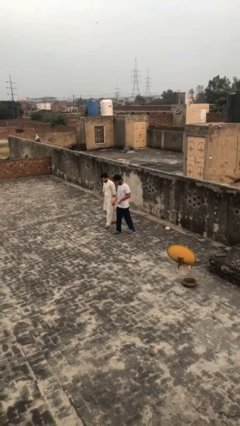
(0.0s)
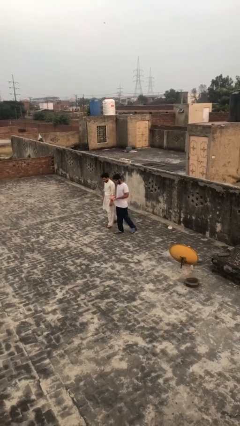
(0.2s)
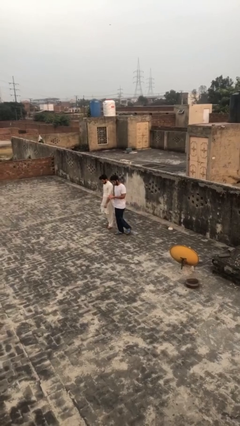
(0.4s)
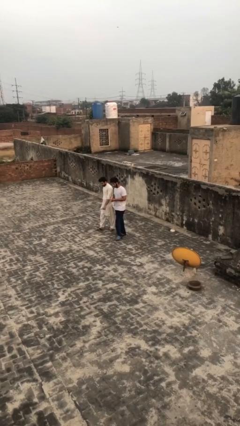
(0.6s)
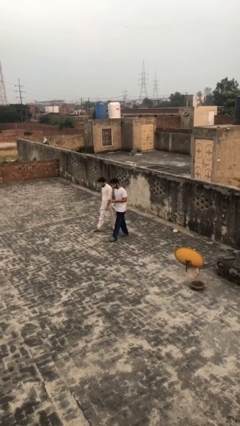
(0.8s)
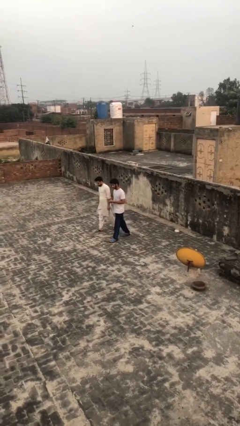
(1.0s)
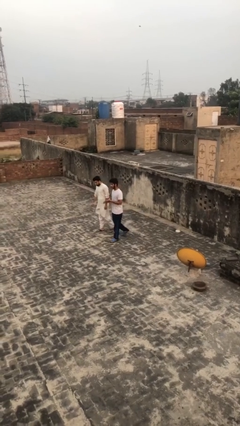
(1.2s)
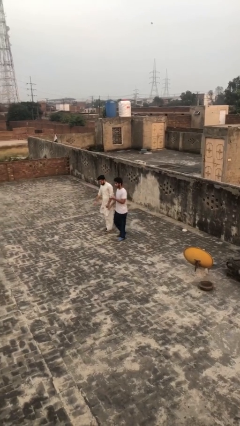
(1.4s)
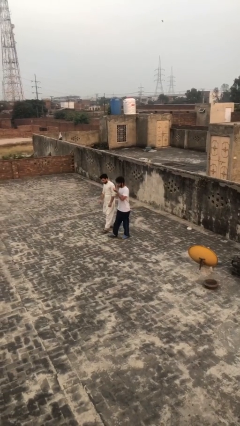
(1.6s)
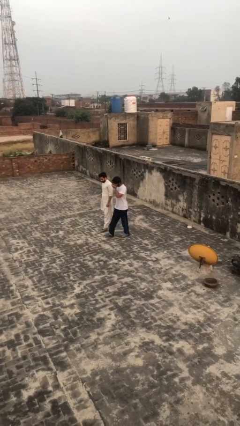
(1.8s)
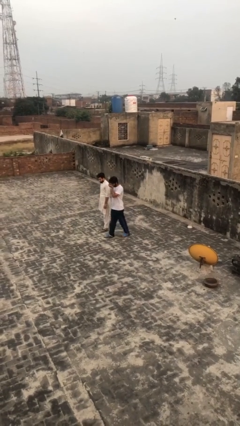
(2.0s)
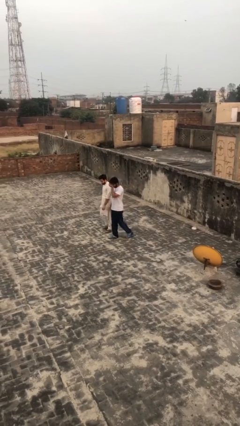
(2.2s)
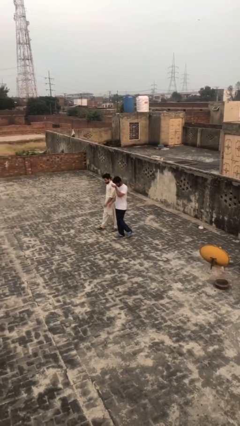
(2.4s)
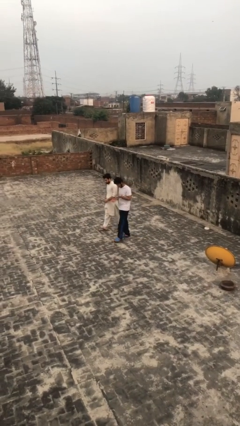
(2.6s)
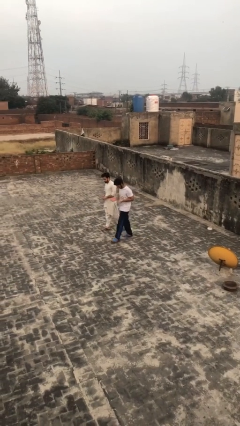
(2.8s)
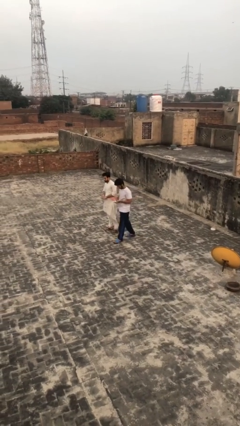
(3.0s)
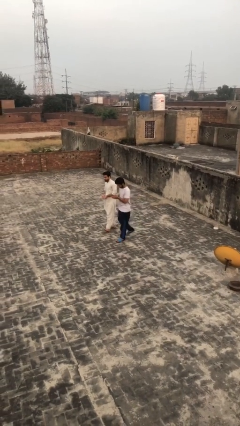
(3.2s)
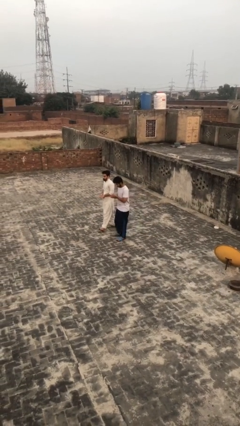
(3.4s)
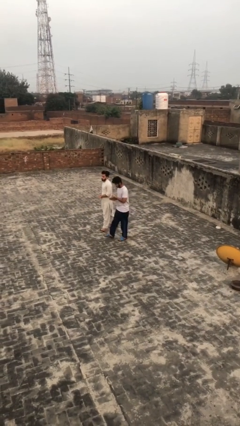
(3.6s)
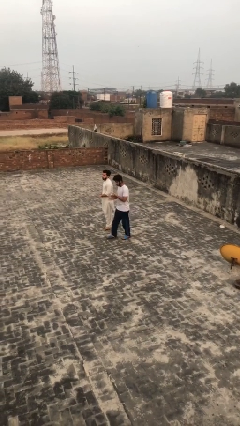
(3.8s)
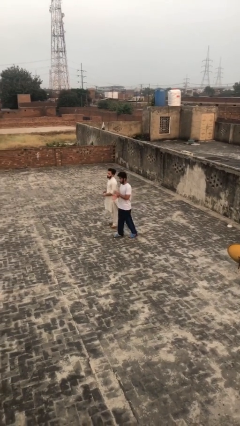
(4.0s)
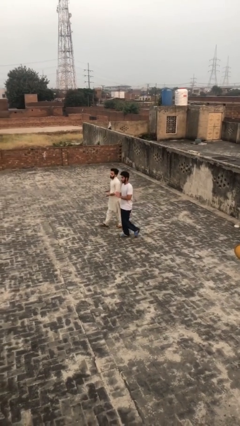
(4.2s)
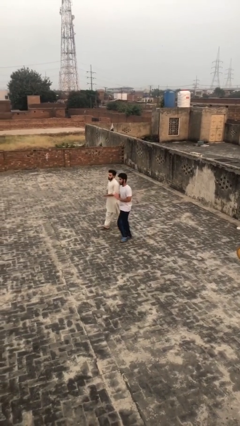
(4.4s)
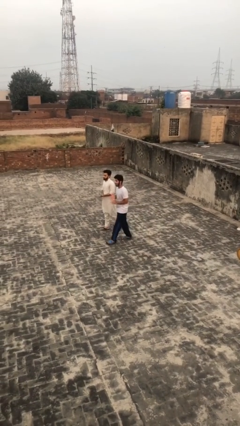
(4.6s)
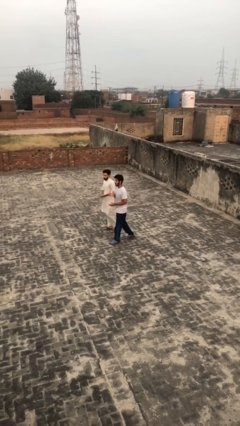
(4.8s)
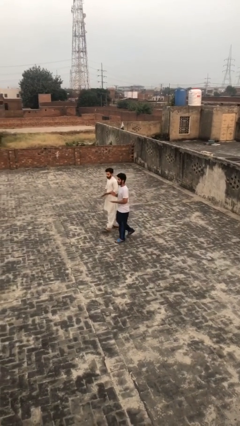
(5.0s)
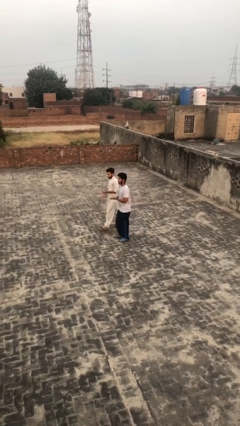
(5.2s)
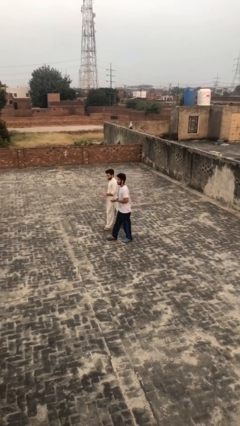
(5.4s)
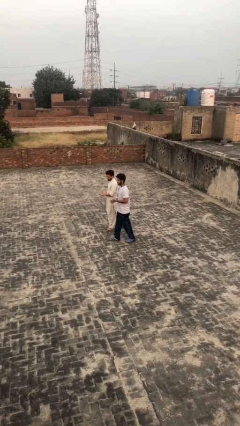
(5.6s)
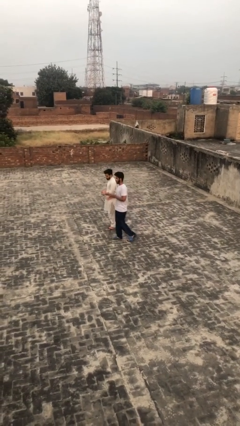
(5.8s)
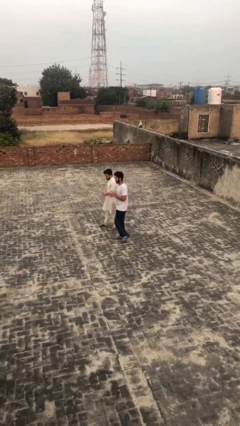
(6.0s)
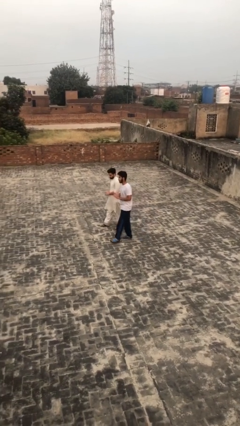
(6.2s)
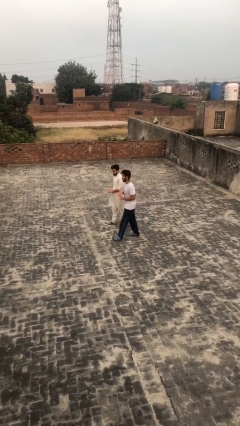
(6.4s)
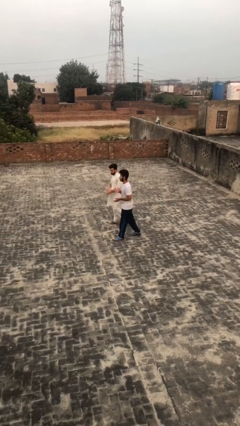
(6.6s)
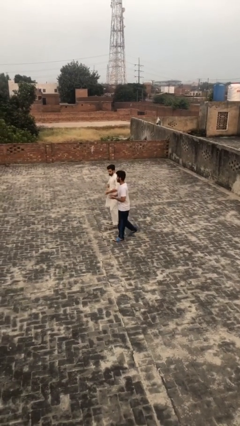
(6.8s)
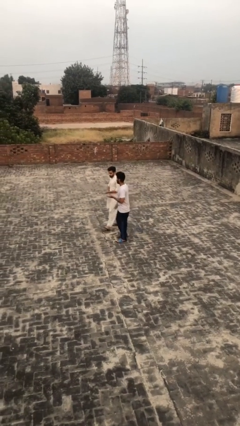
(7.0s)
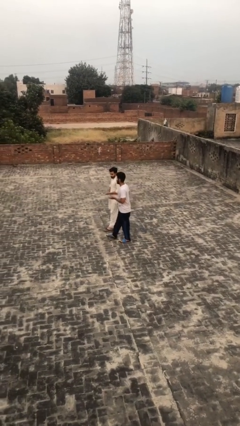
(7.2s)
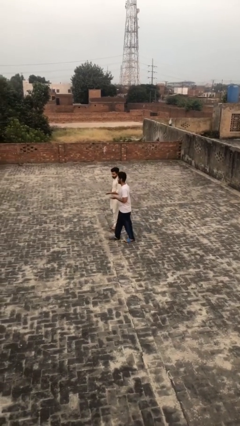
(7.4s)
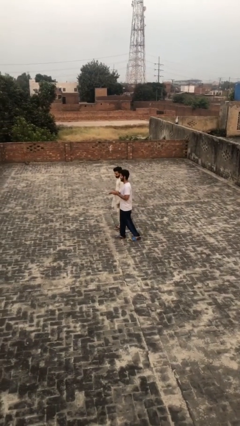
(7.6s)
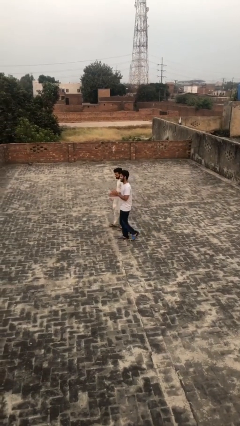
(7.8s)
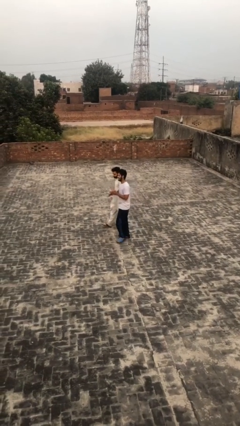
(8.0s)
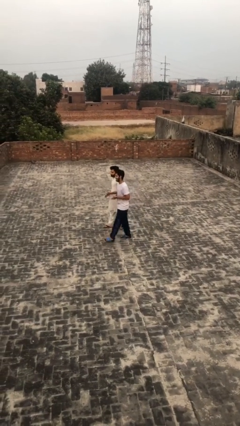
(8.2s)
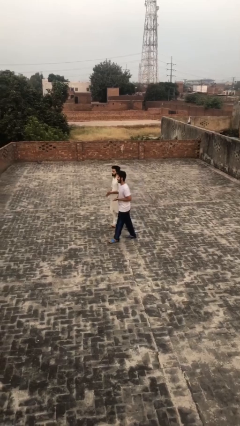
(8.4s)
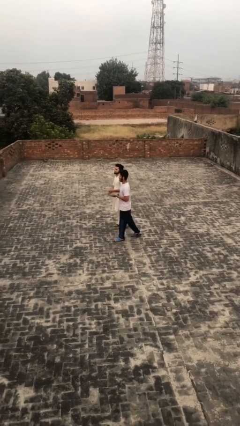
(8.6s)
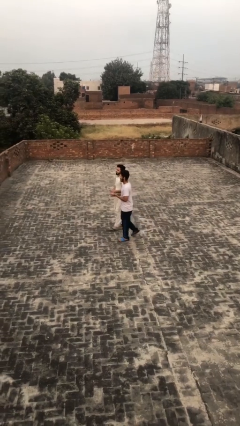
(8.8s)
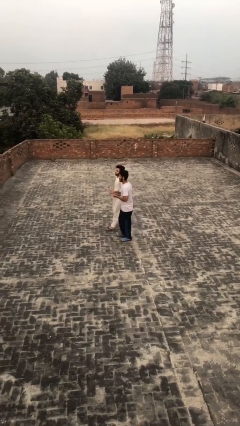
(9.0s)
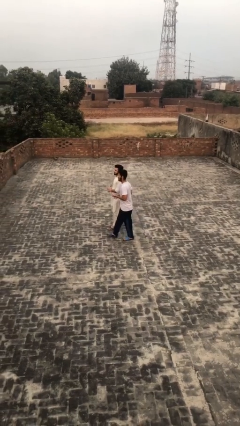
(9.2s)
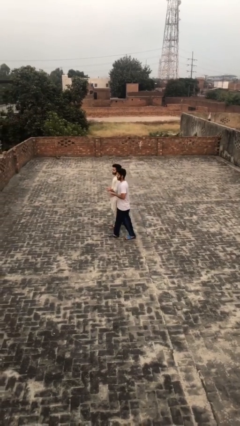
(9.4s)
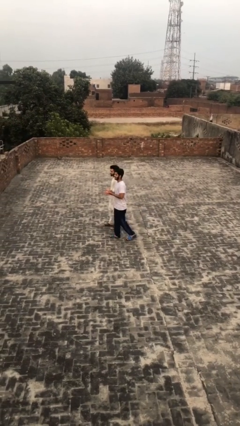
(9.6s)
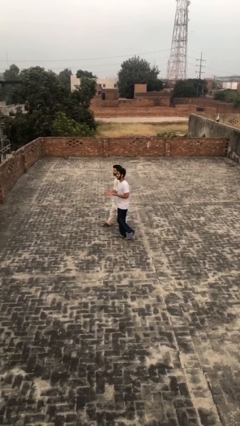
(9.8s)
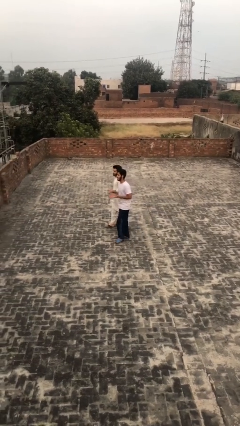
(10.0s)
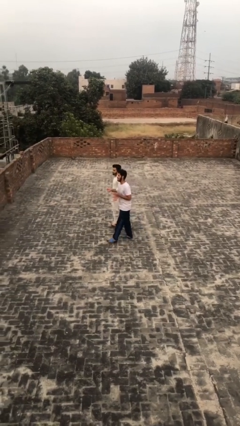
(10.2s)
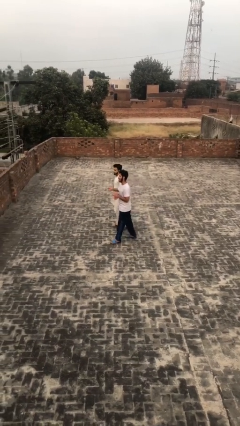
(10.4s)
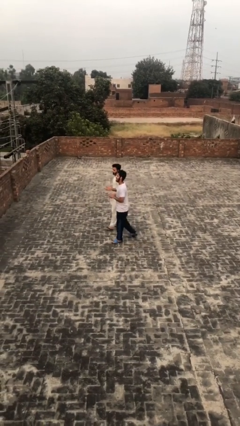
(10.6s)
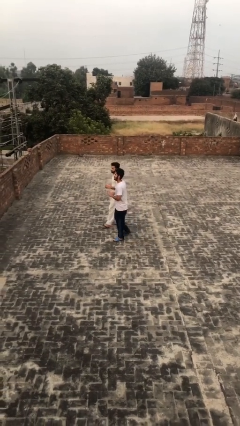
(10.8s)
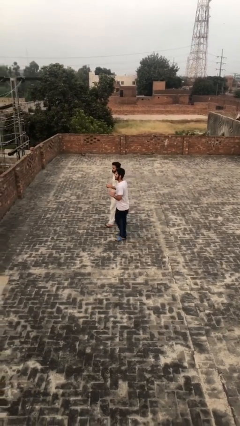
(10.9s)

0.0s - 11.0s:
person talks to person

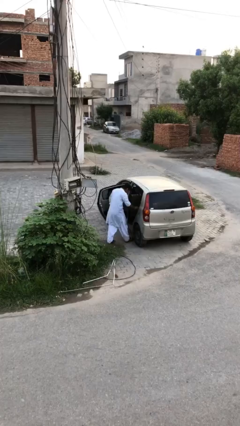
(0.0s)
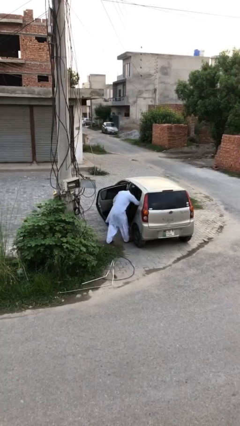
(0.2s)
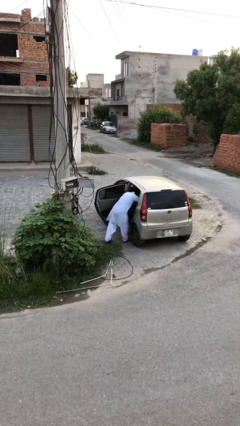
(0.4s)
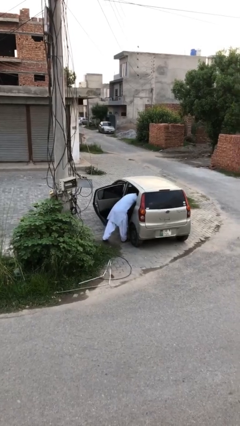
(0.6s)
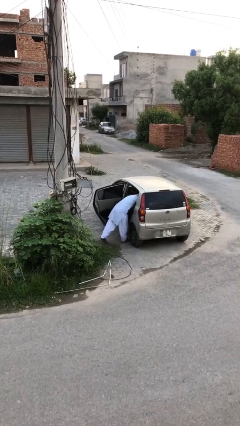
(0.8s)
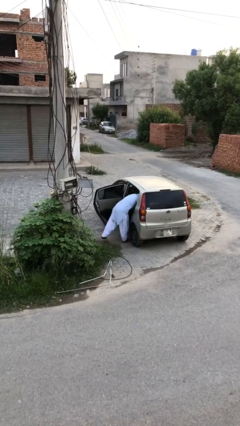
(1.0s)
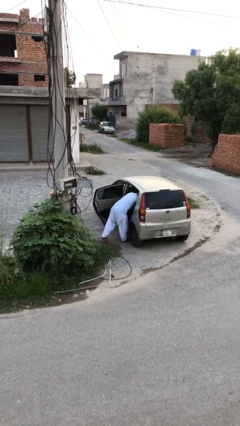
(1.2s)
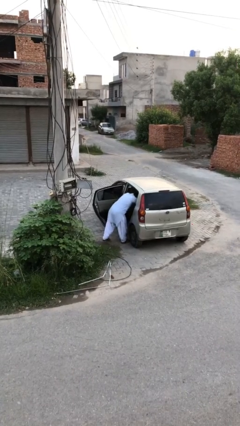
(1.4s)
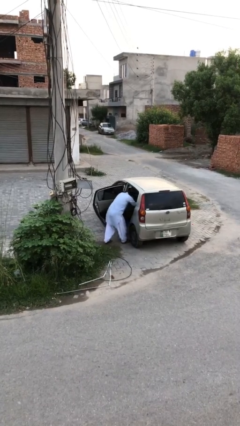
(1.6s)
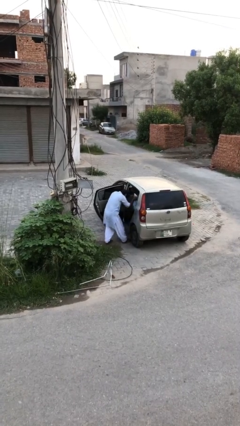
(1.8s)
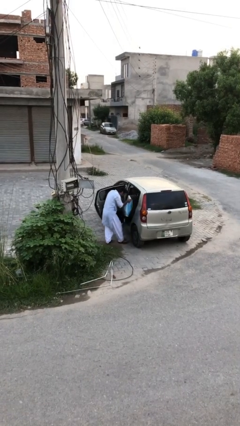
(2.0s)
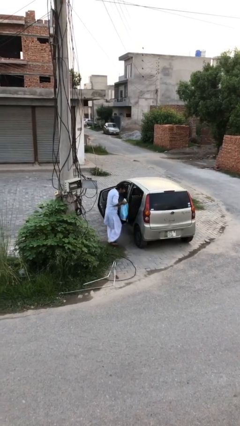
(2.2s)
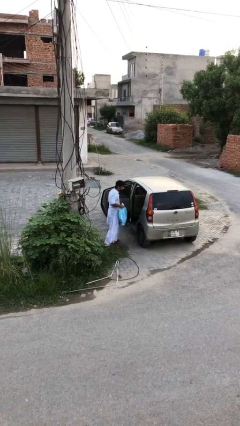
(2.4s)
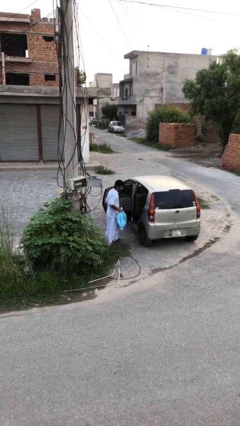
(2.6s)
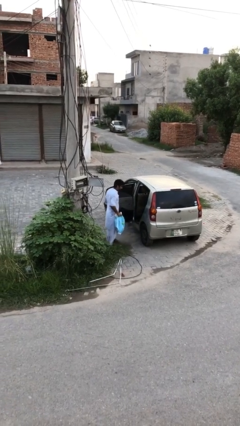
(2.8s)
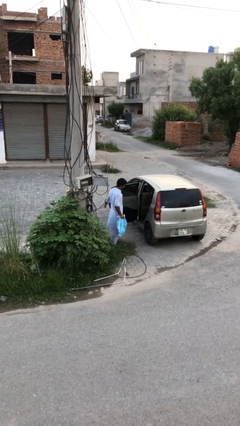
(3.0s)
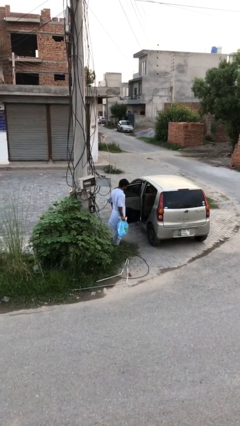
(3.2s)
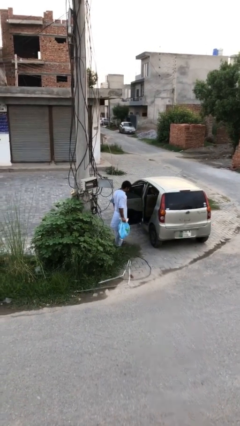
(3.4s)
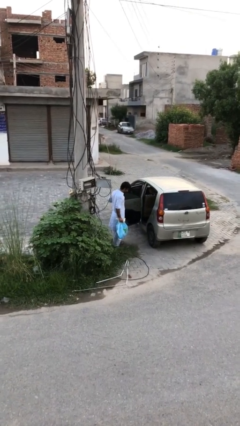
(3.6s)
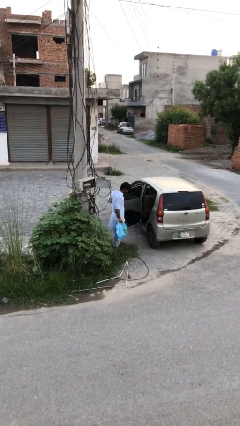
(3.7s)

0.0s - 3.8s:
person unloads car

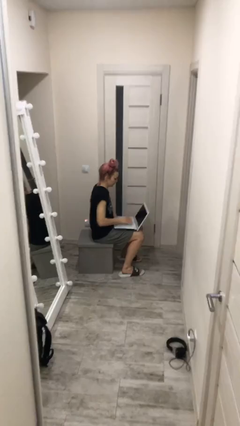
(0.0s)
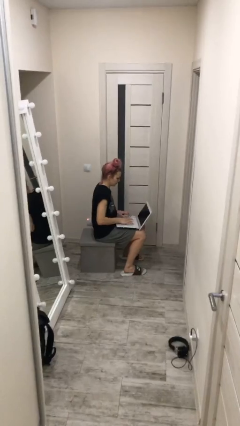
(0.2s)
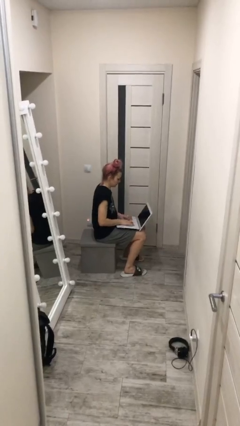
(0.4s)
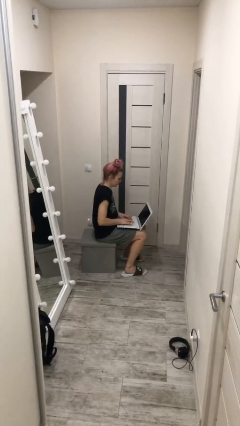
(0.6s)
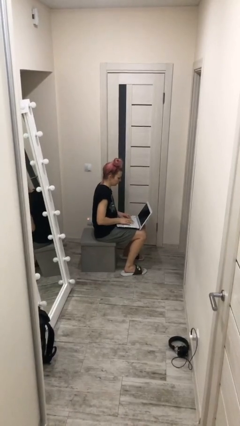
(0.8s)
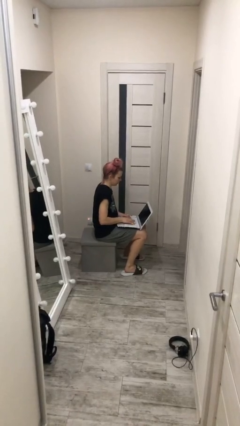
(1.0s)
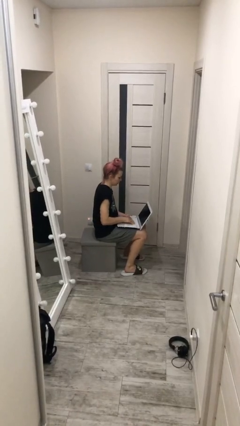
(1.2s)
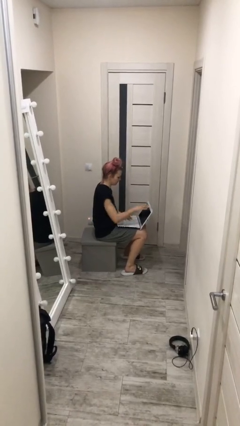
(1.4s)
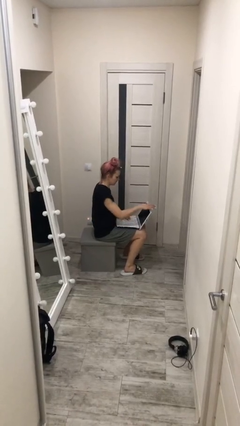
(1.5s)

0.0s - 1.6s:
person interacts with laptop

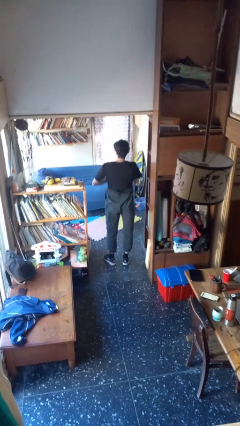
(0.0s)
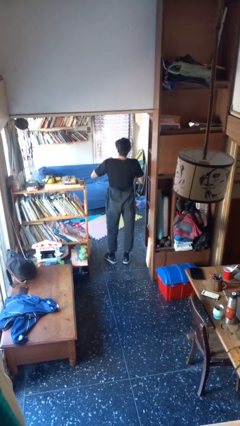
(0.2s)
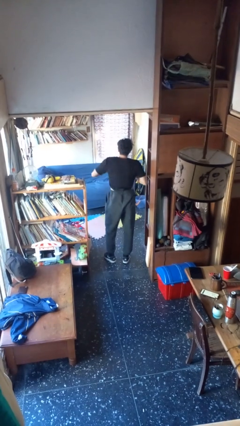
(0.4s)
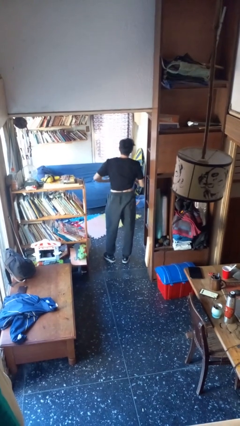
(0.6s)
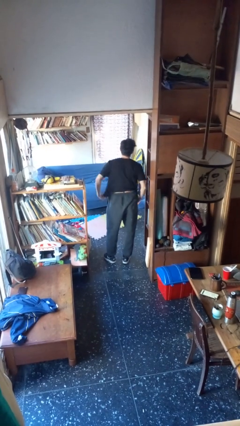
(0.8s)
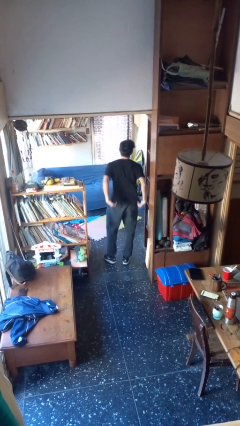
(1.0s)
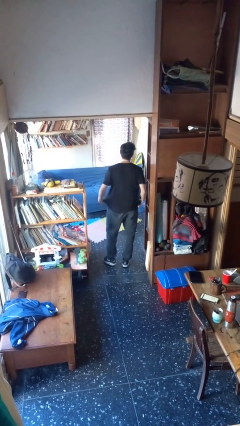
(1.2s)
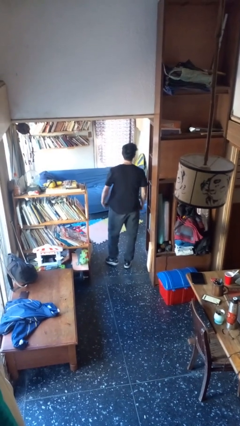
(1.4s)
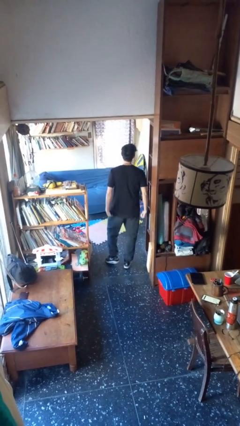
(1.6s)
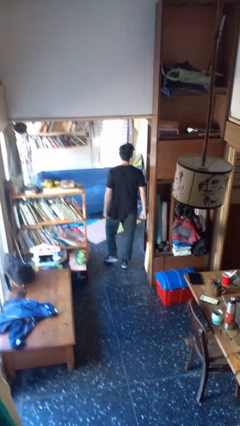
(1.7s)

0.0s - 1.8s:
person untucks shirt
